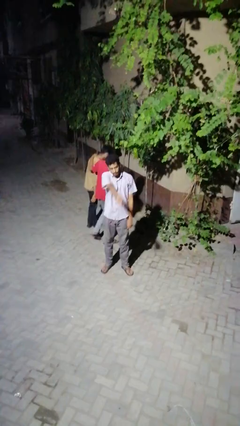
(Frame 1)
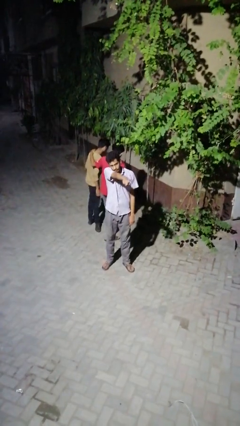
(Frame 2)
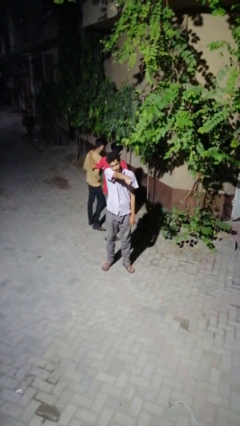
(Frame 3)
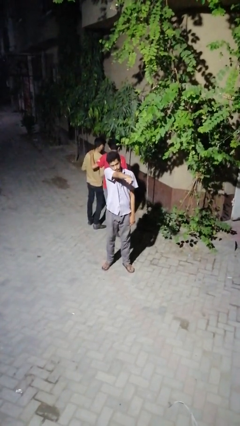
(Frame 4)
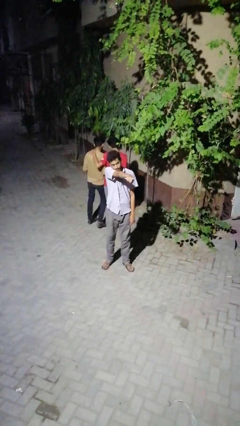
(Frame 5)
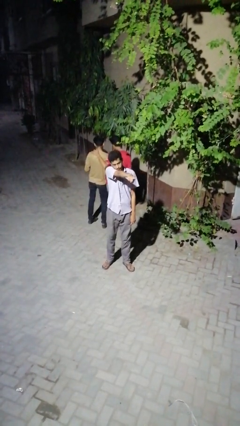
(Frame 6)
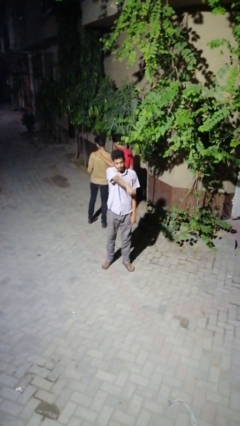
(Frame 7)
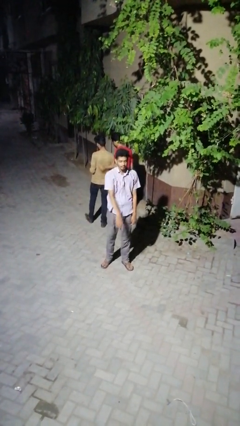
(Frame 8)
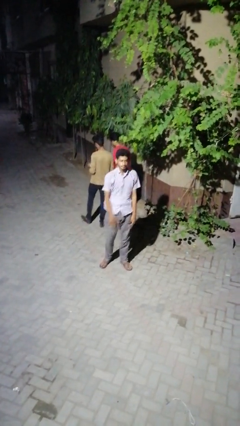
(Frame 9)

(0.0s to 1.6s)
person points at person

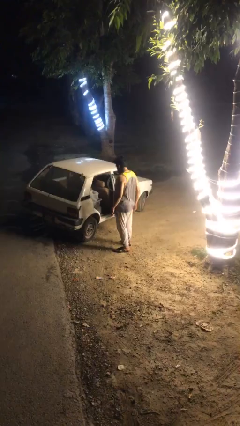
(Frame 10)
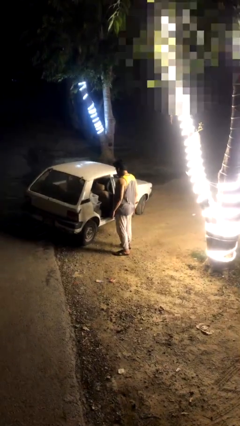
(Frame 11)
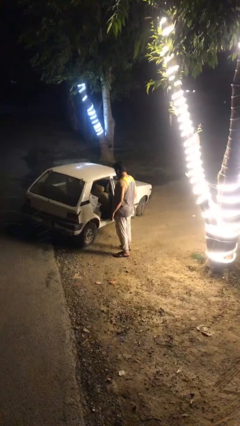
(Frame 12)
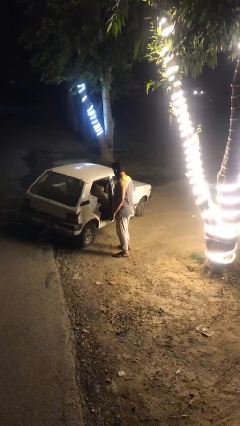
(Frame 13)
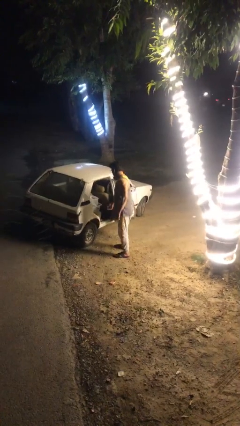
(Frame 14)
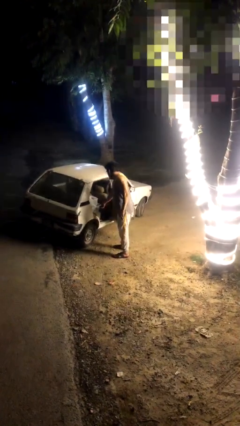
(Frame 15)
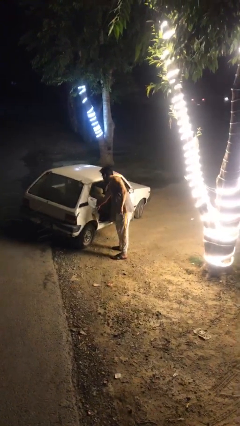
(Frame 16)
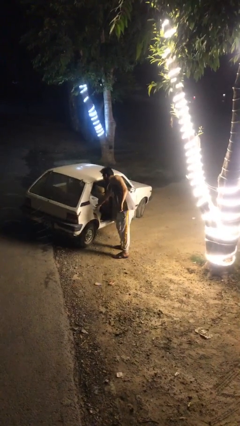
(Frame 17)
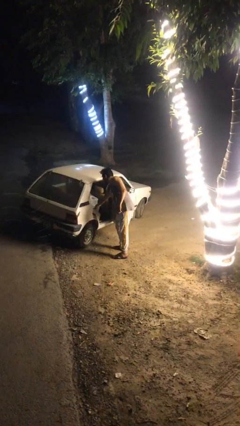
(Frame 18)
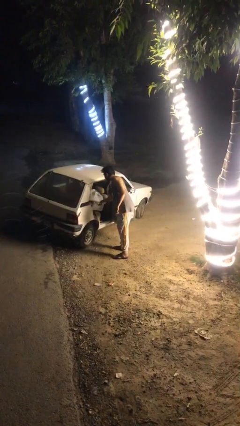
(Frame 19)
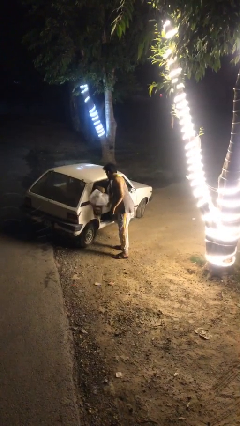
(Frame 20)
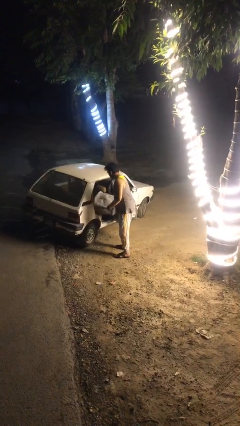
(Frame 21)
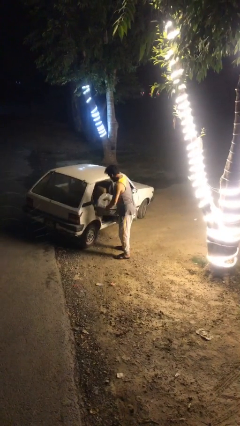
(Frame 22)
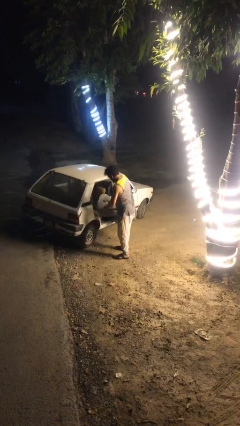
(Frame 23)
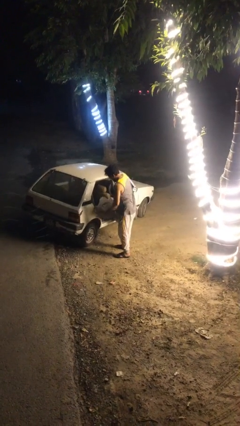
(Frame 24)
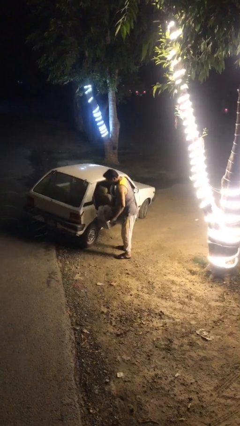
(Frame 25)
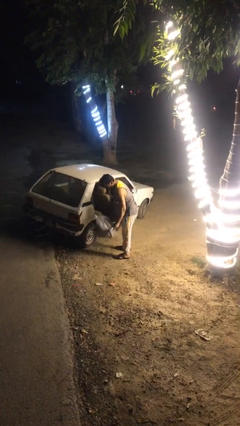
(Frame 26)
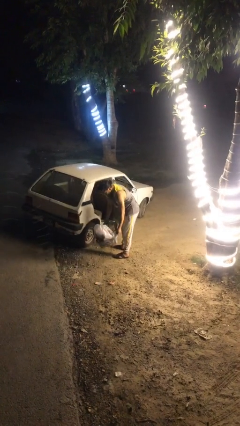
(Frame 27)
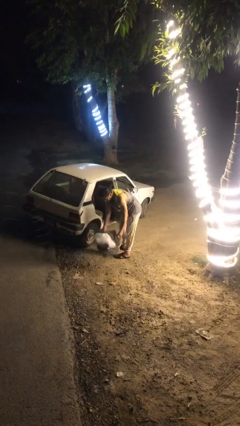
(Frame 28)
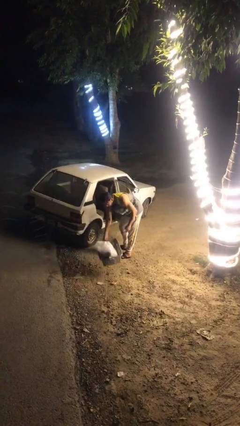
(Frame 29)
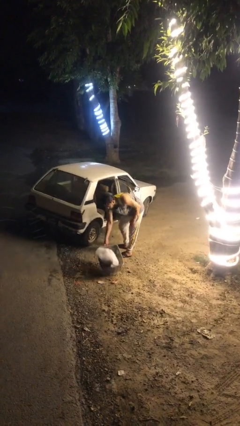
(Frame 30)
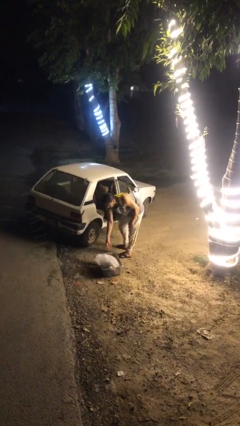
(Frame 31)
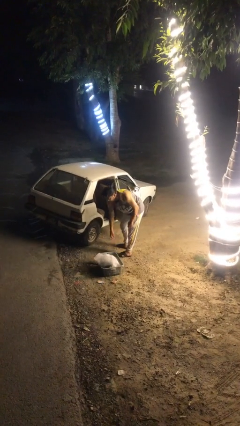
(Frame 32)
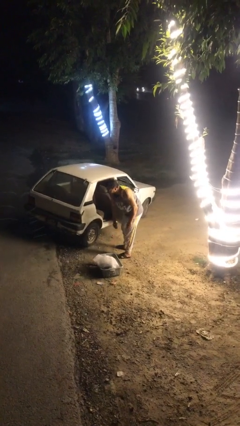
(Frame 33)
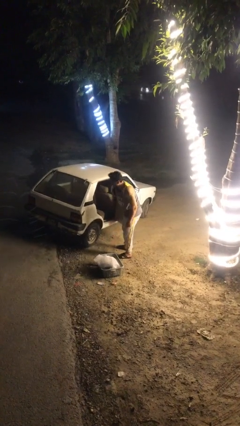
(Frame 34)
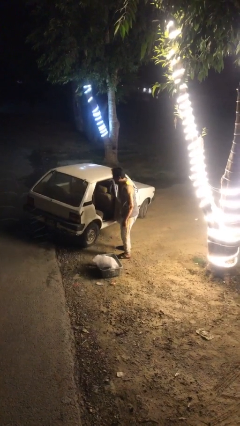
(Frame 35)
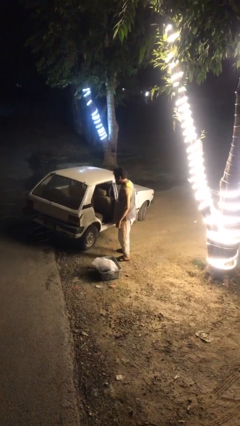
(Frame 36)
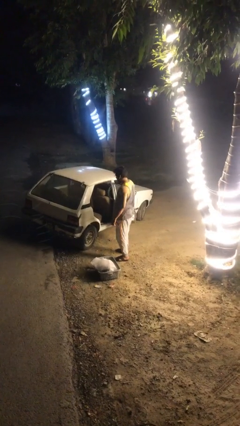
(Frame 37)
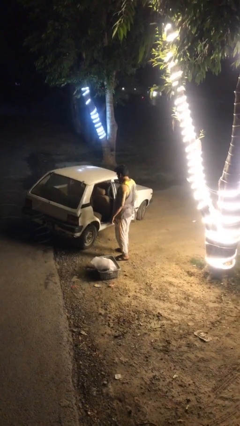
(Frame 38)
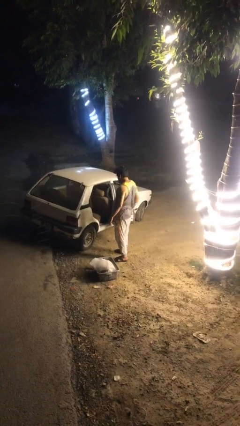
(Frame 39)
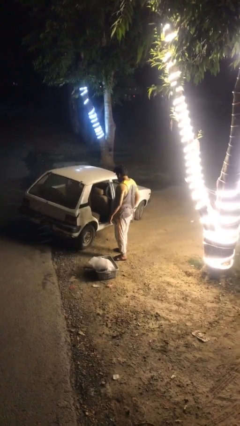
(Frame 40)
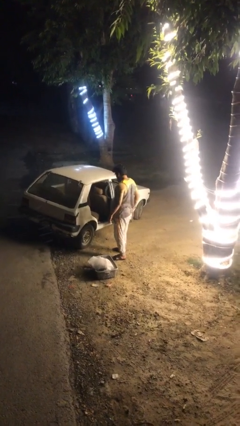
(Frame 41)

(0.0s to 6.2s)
person unloads car

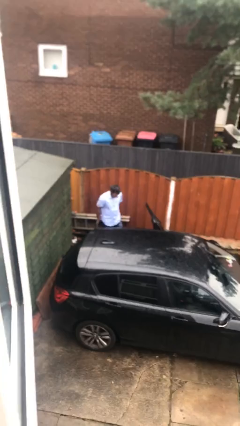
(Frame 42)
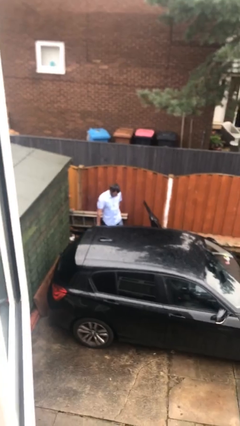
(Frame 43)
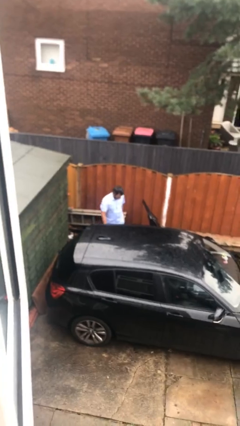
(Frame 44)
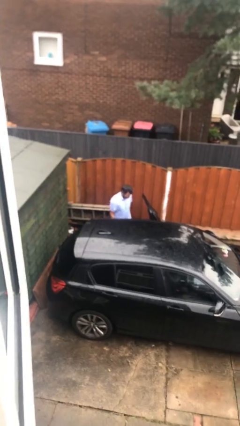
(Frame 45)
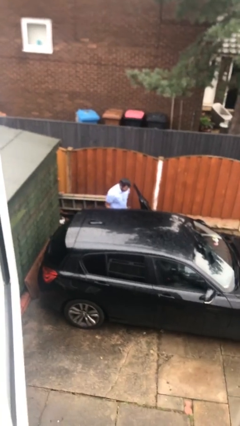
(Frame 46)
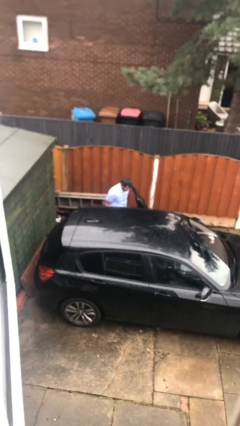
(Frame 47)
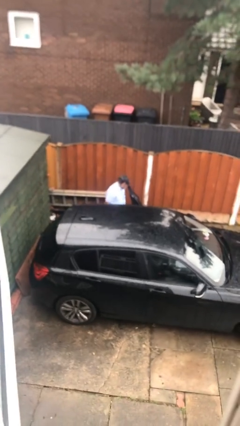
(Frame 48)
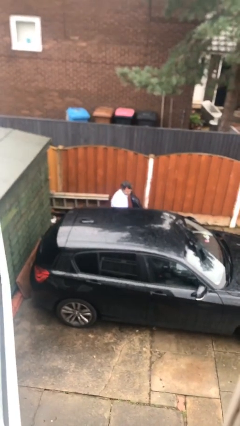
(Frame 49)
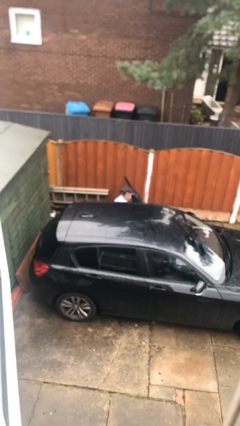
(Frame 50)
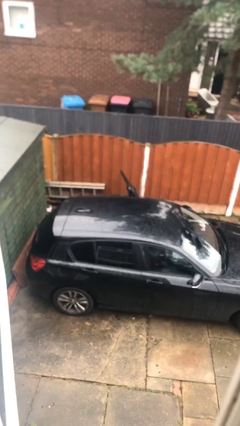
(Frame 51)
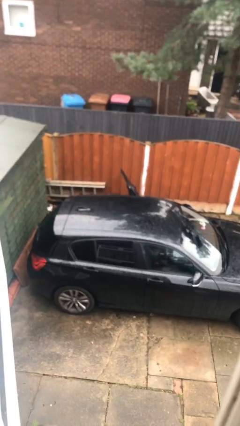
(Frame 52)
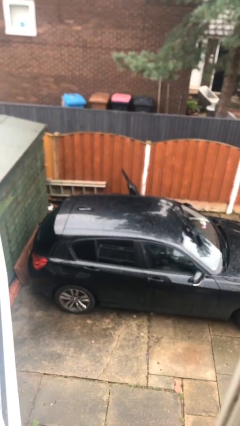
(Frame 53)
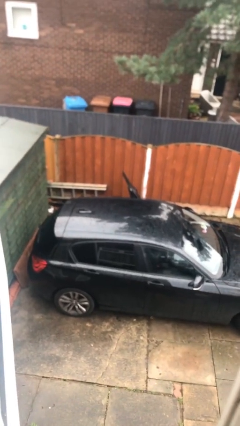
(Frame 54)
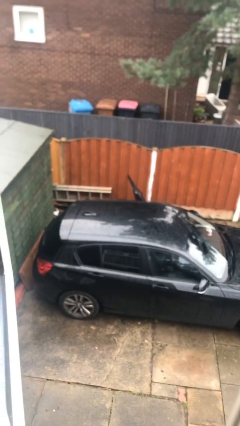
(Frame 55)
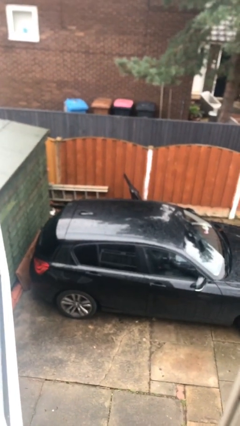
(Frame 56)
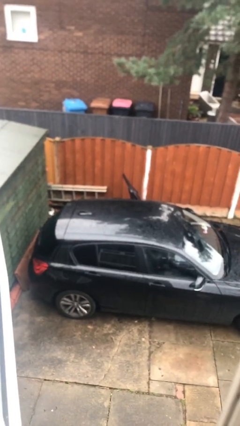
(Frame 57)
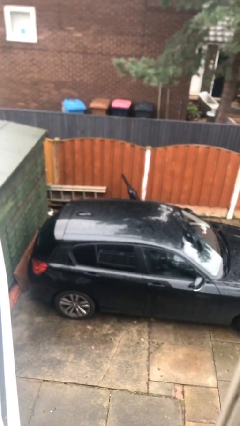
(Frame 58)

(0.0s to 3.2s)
person enters car

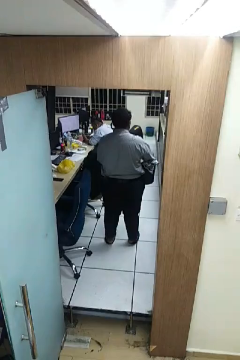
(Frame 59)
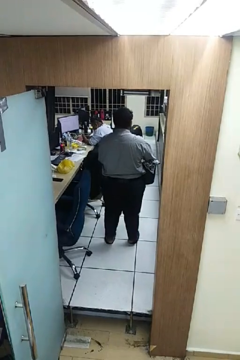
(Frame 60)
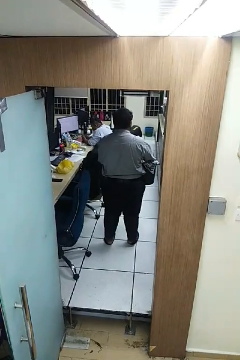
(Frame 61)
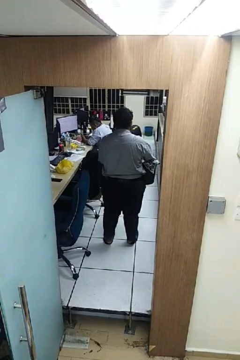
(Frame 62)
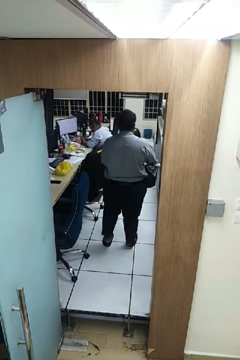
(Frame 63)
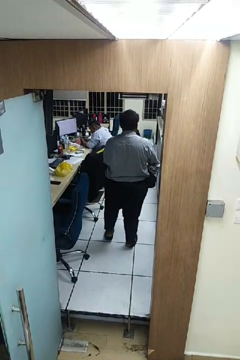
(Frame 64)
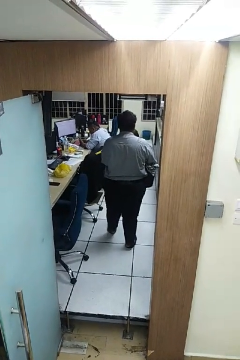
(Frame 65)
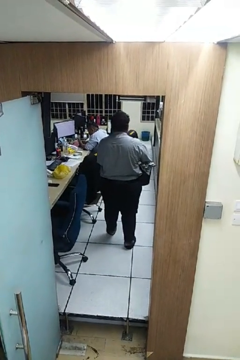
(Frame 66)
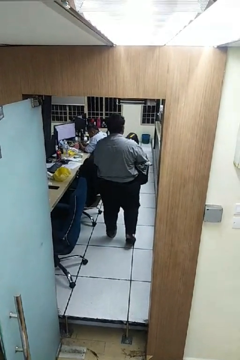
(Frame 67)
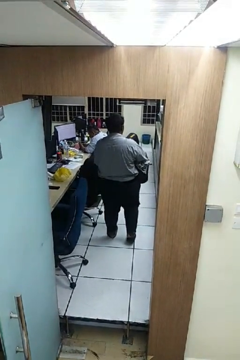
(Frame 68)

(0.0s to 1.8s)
person carries laundry basket

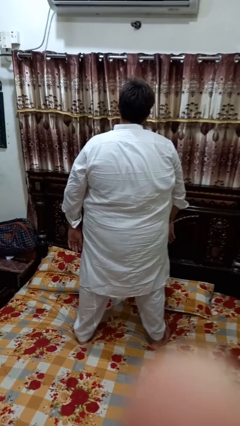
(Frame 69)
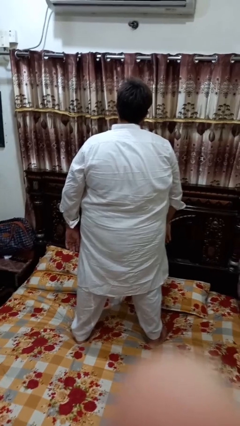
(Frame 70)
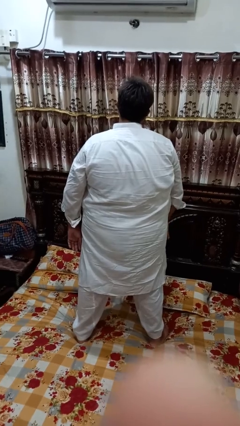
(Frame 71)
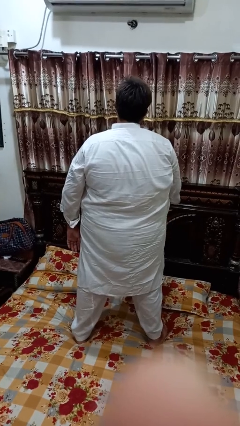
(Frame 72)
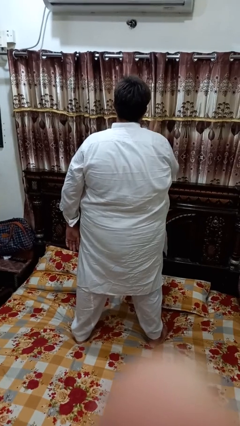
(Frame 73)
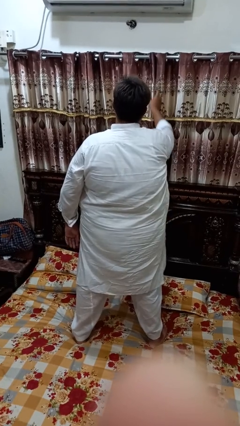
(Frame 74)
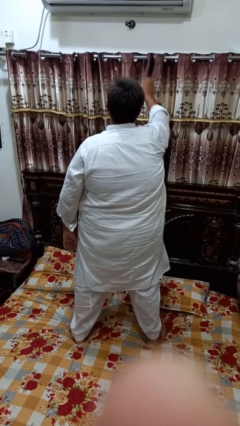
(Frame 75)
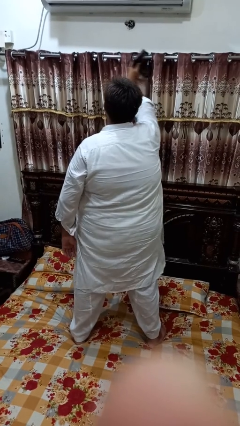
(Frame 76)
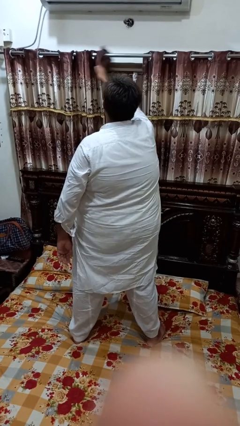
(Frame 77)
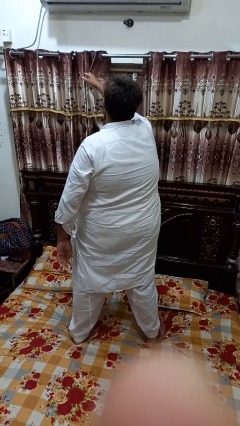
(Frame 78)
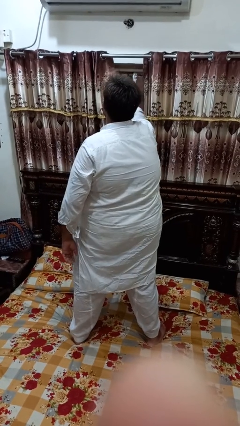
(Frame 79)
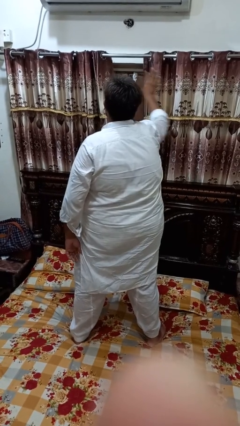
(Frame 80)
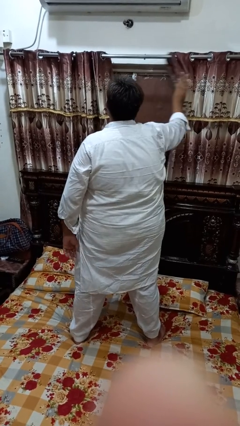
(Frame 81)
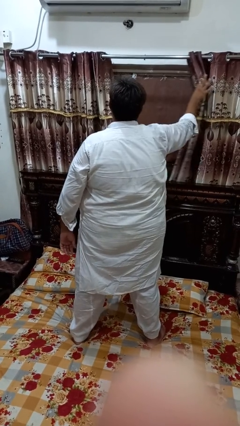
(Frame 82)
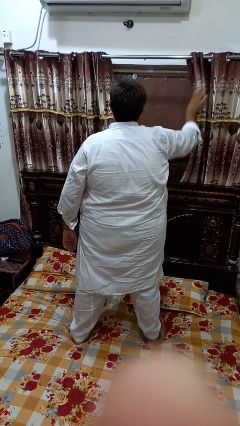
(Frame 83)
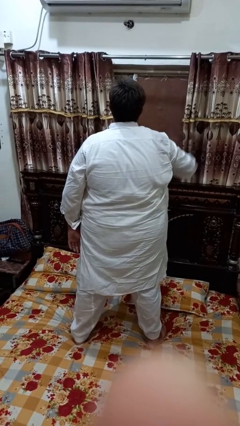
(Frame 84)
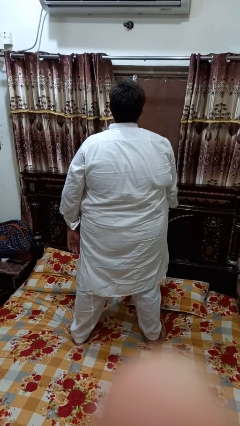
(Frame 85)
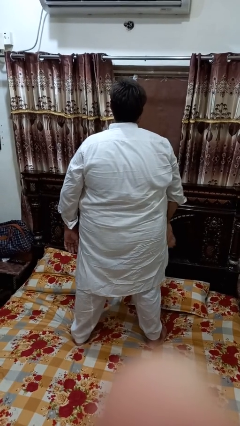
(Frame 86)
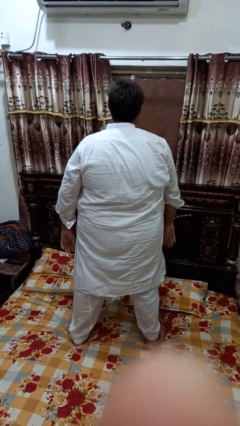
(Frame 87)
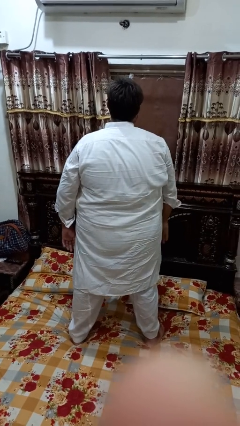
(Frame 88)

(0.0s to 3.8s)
person opens curtains

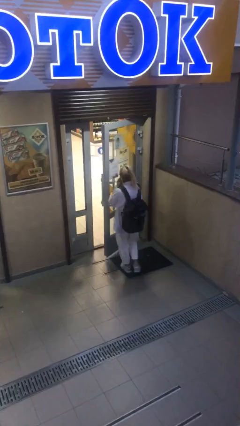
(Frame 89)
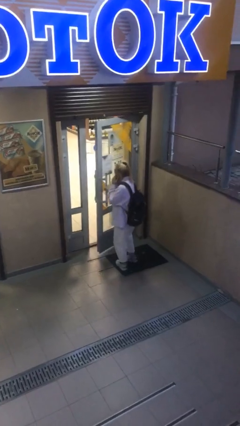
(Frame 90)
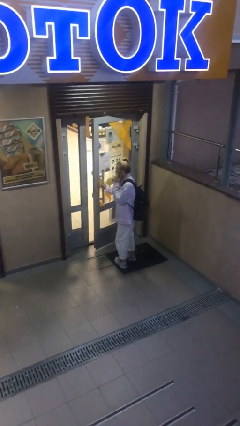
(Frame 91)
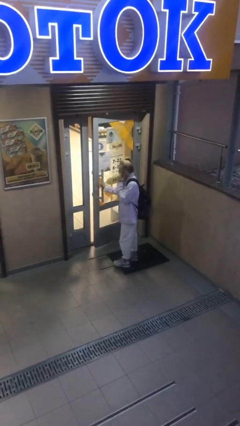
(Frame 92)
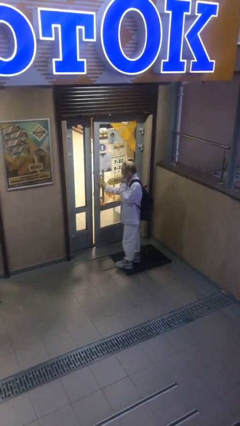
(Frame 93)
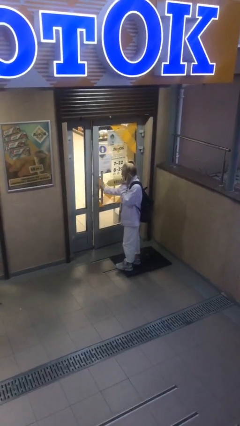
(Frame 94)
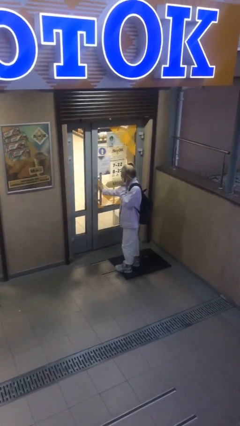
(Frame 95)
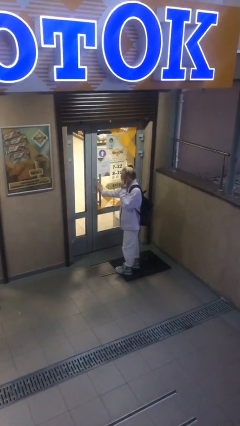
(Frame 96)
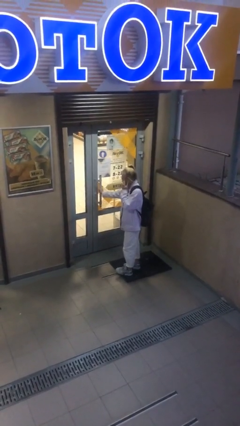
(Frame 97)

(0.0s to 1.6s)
person closes facility door
